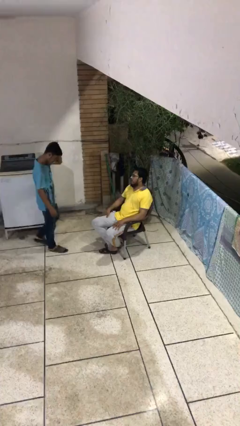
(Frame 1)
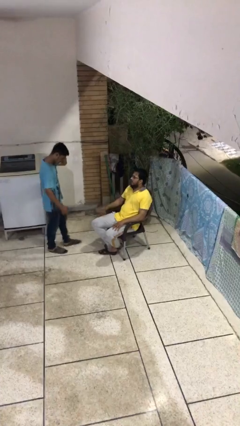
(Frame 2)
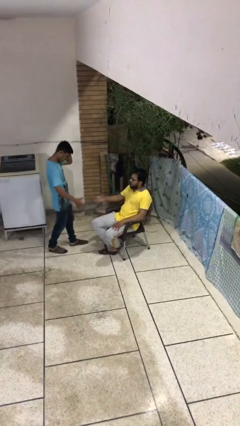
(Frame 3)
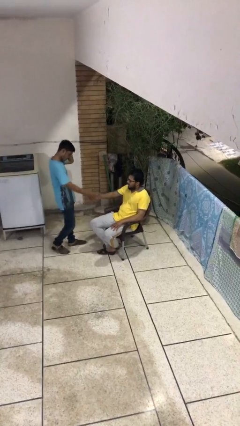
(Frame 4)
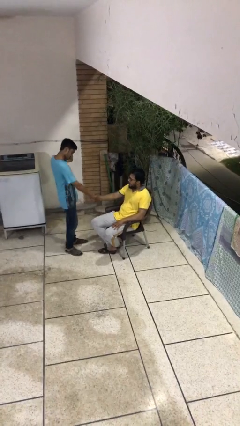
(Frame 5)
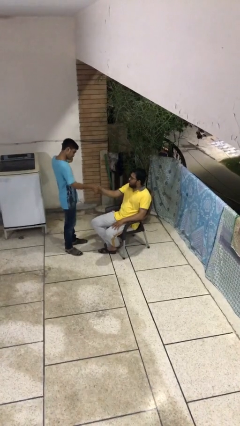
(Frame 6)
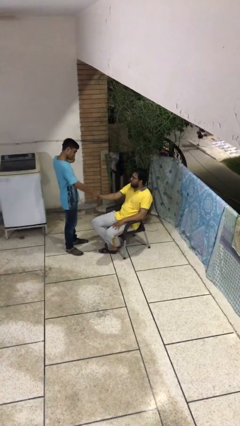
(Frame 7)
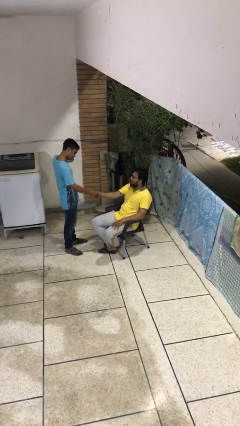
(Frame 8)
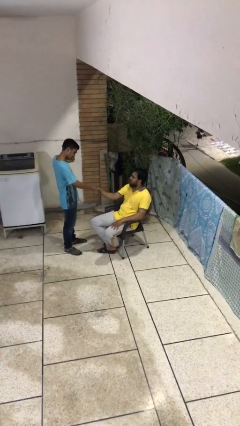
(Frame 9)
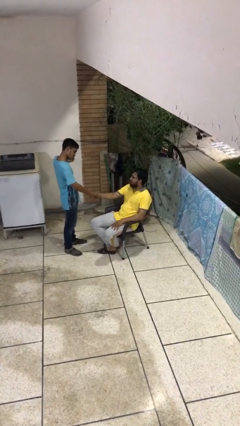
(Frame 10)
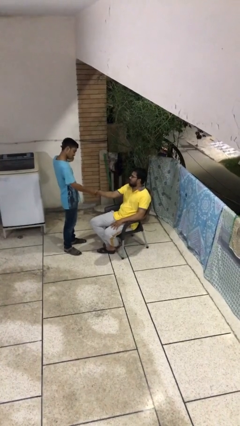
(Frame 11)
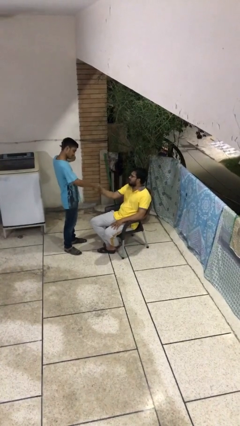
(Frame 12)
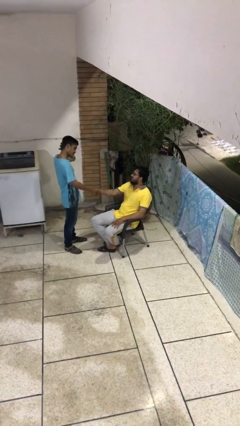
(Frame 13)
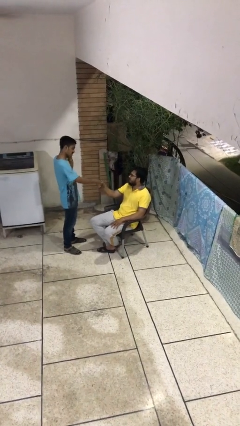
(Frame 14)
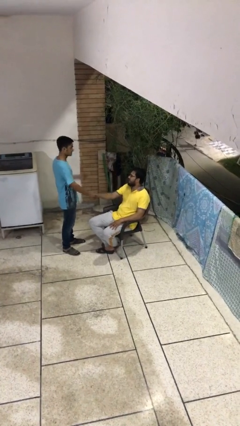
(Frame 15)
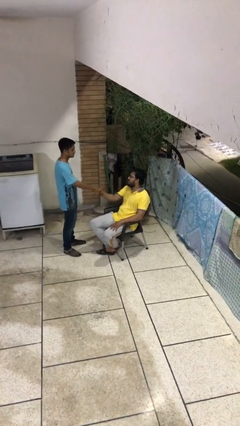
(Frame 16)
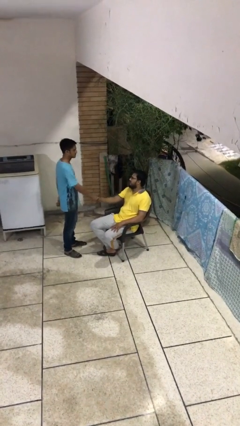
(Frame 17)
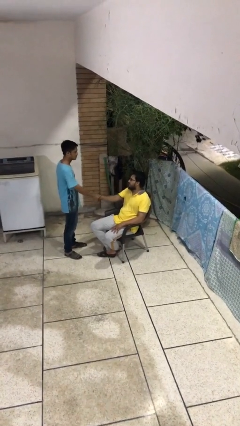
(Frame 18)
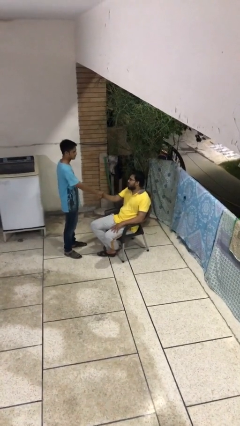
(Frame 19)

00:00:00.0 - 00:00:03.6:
person shakes hand

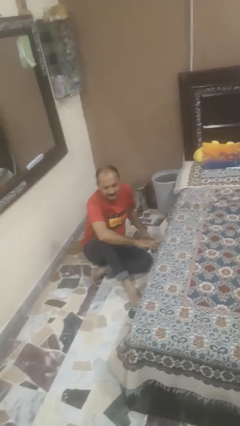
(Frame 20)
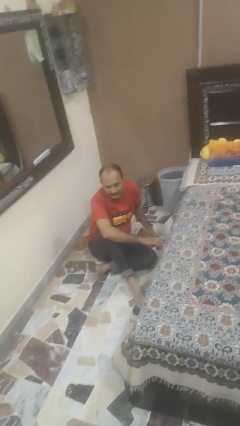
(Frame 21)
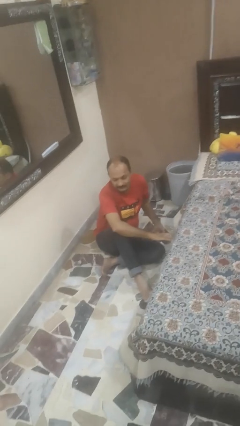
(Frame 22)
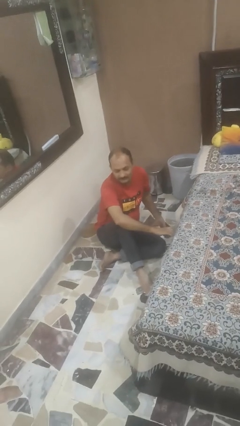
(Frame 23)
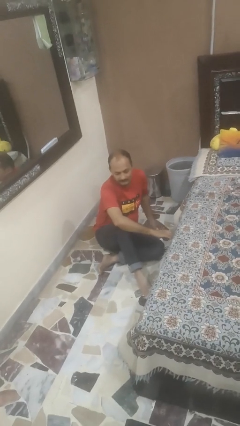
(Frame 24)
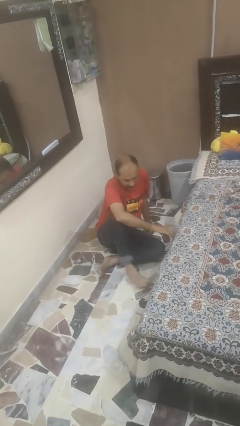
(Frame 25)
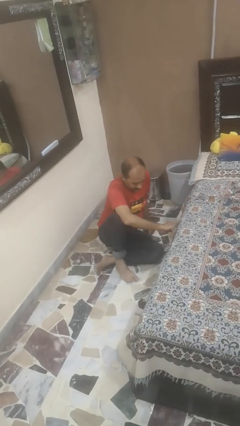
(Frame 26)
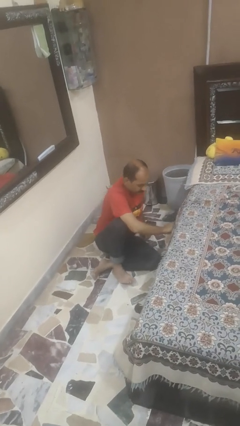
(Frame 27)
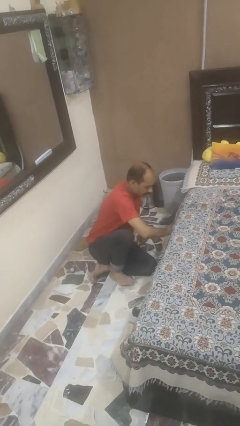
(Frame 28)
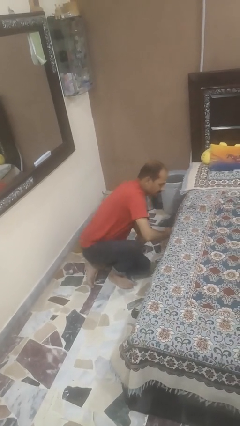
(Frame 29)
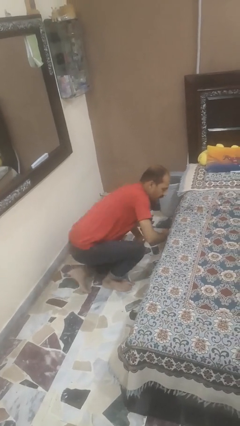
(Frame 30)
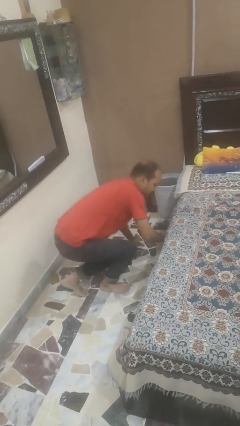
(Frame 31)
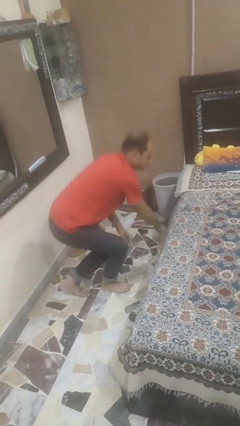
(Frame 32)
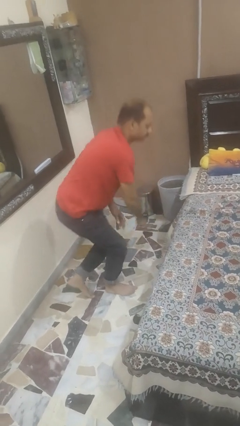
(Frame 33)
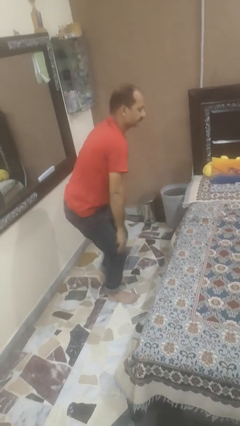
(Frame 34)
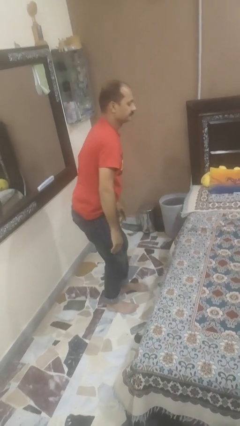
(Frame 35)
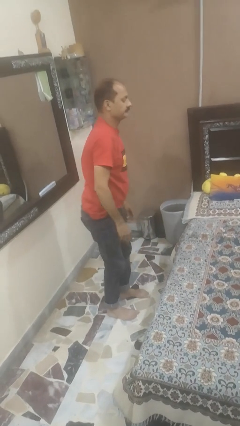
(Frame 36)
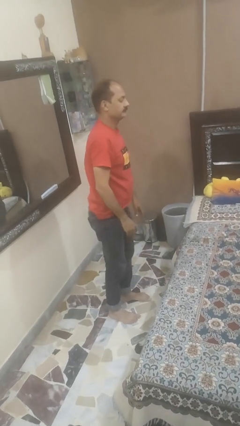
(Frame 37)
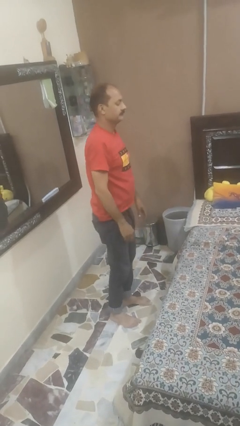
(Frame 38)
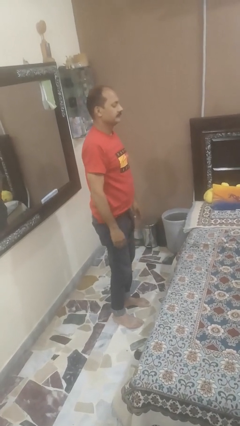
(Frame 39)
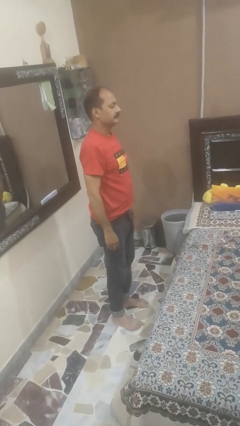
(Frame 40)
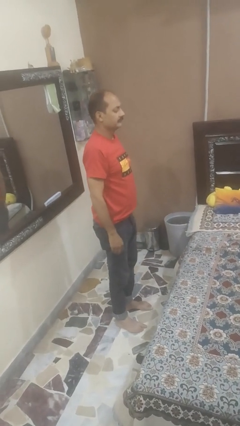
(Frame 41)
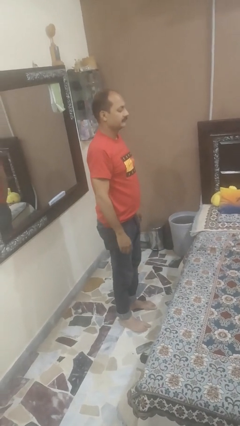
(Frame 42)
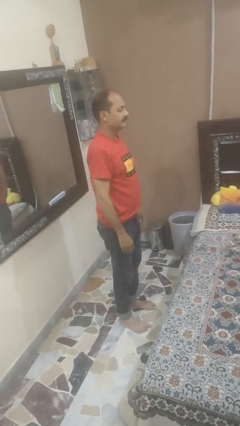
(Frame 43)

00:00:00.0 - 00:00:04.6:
person stands up from floor

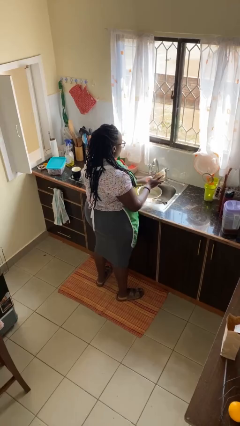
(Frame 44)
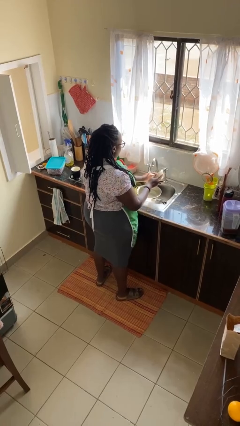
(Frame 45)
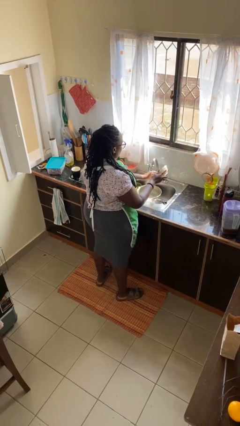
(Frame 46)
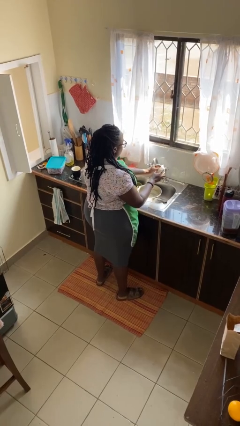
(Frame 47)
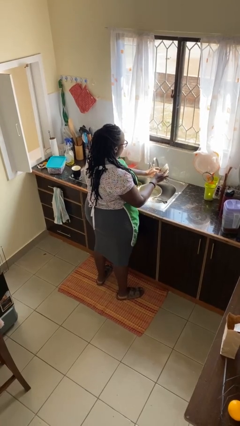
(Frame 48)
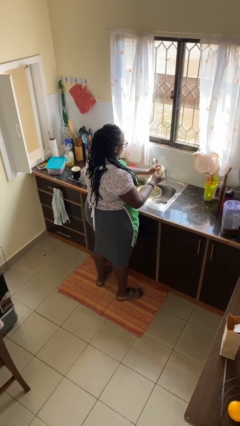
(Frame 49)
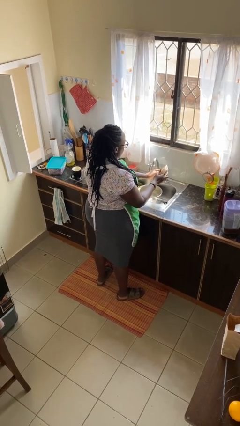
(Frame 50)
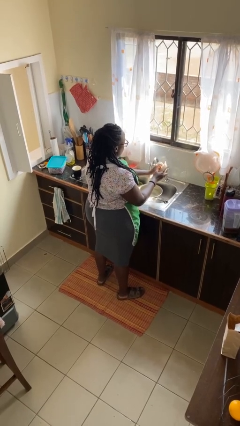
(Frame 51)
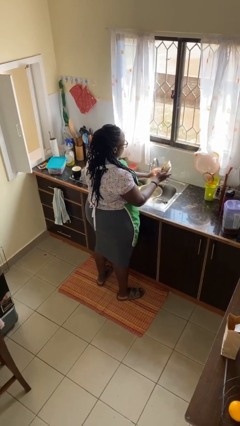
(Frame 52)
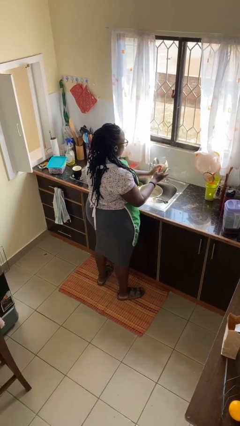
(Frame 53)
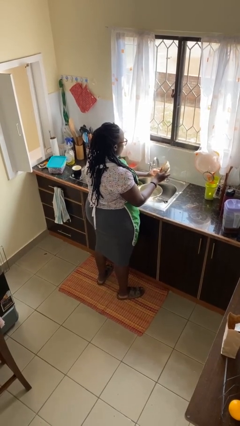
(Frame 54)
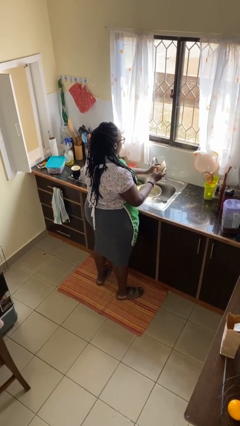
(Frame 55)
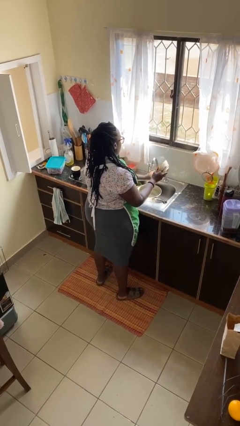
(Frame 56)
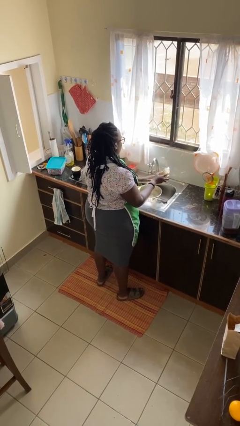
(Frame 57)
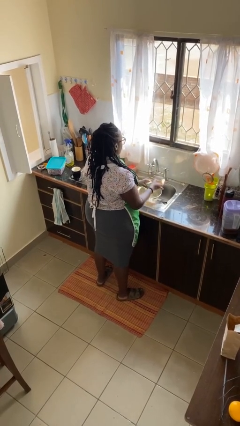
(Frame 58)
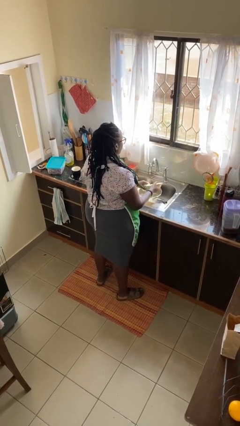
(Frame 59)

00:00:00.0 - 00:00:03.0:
person washes dish

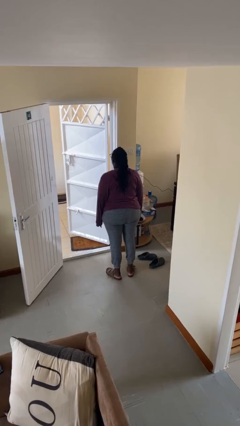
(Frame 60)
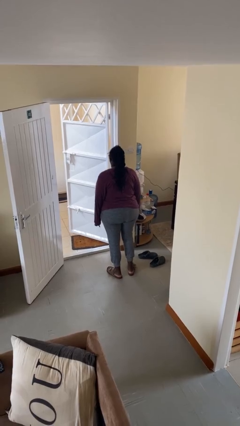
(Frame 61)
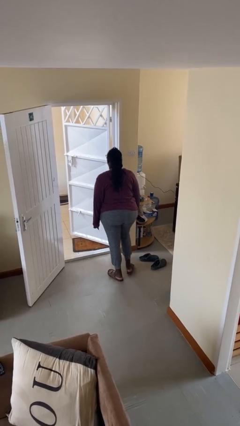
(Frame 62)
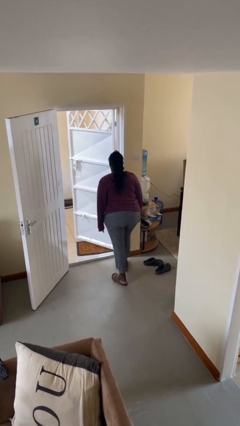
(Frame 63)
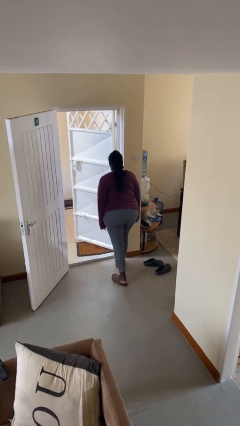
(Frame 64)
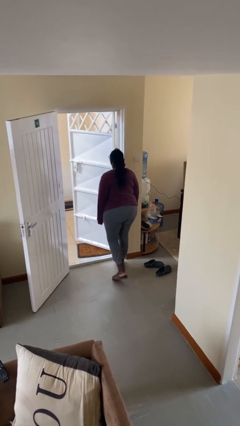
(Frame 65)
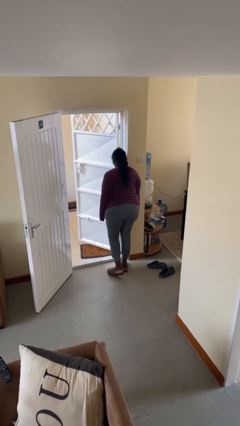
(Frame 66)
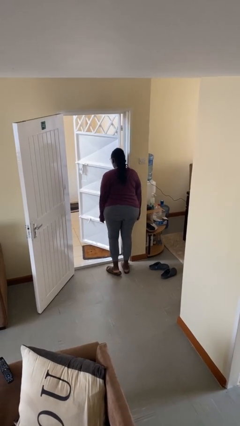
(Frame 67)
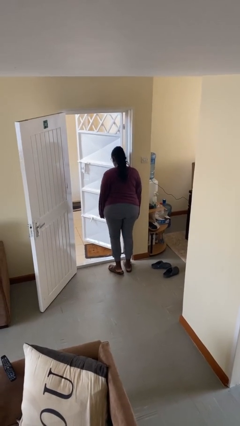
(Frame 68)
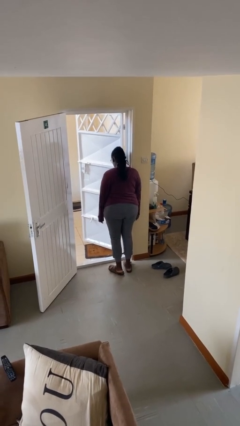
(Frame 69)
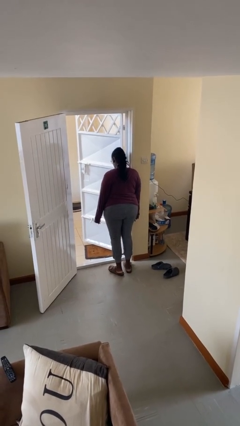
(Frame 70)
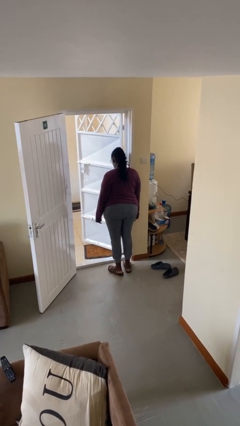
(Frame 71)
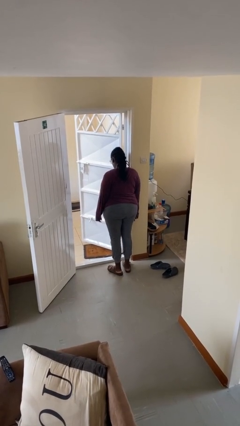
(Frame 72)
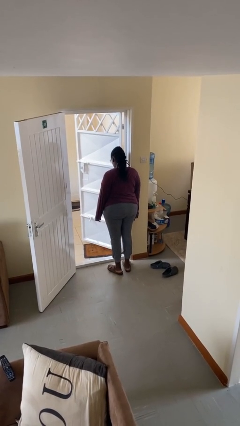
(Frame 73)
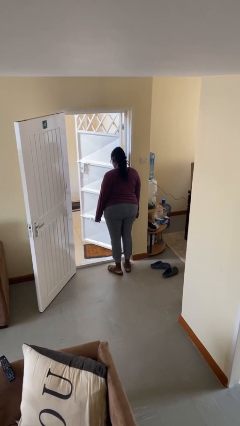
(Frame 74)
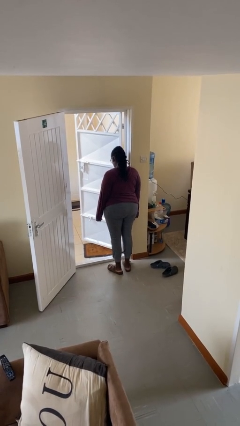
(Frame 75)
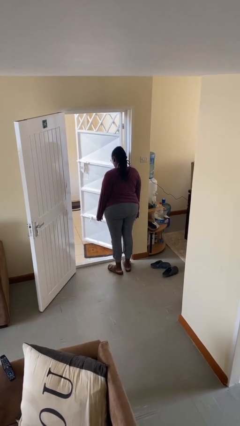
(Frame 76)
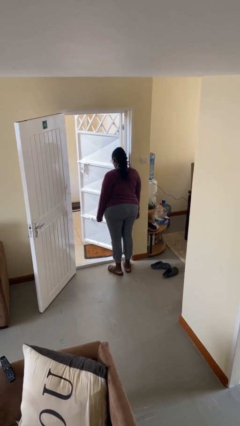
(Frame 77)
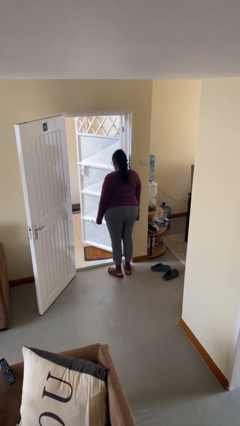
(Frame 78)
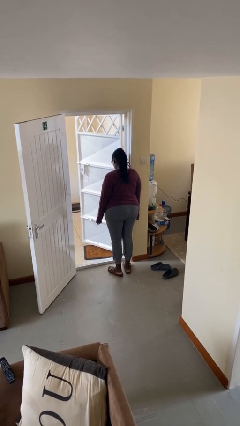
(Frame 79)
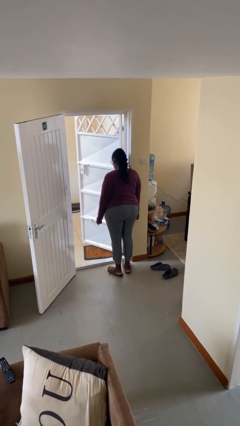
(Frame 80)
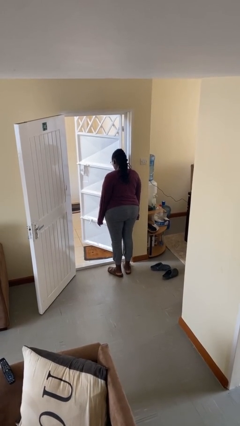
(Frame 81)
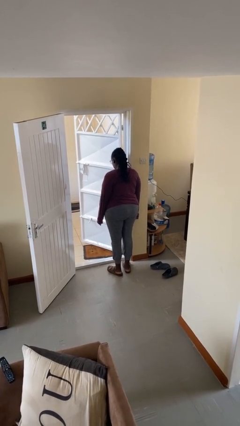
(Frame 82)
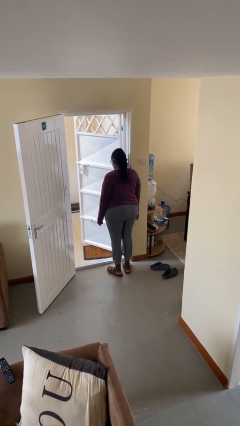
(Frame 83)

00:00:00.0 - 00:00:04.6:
person bumps into wall

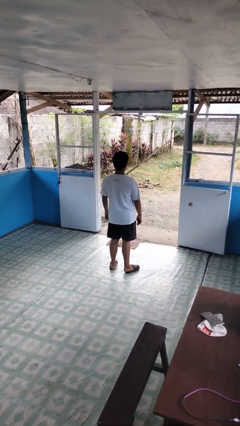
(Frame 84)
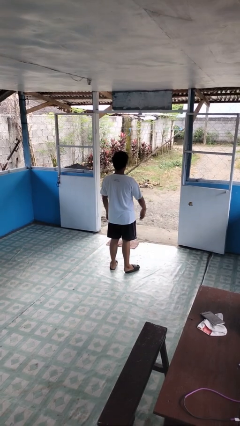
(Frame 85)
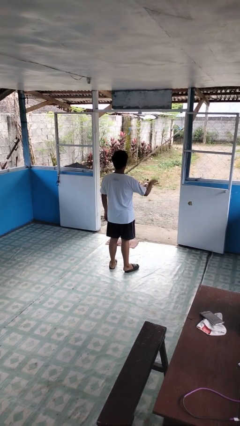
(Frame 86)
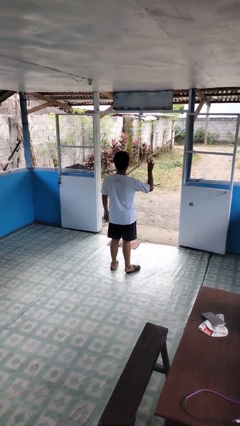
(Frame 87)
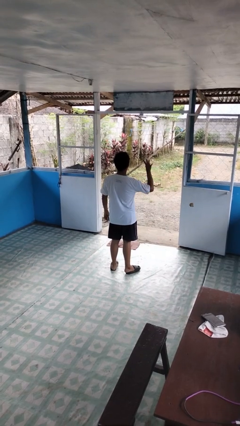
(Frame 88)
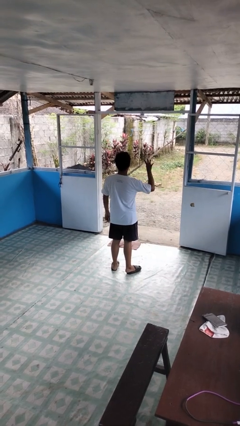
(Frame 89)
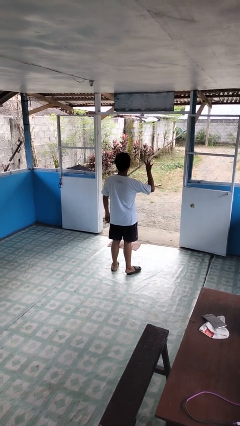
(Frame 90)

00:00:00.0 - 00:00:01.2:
person gestures number four

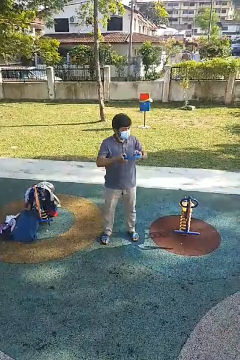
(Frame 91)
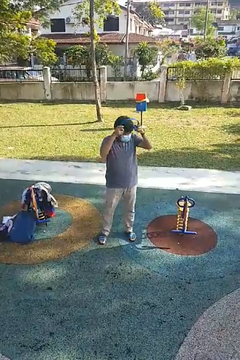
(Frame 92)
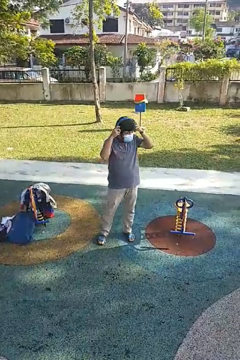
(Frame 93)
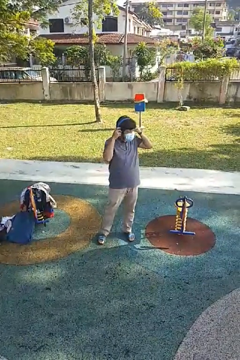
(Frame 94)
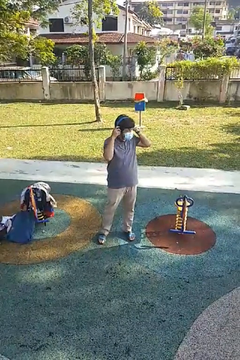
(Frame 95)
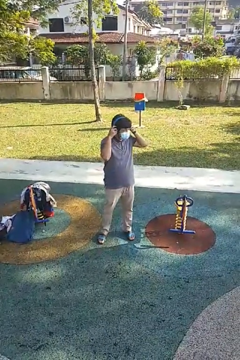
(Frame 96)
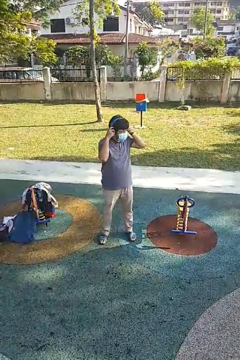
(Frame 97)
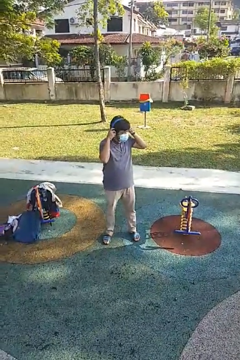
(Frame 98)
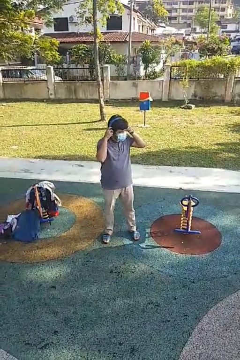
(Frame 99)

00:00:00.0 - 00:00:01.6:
person puts on headphones
